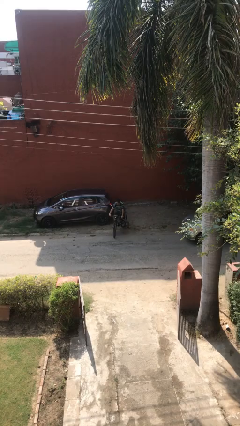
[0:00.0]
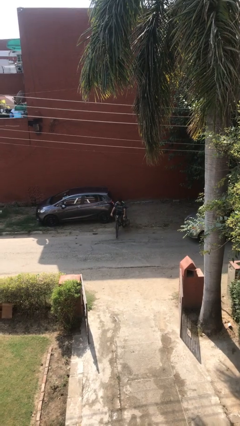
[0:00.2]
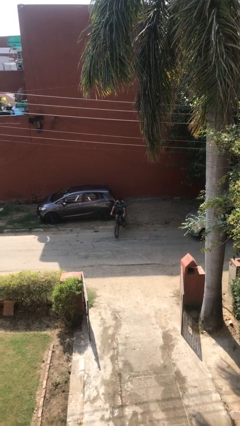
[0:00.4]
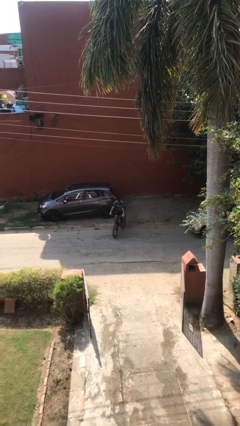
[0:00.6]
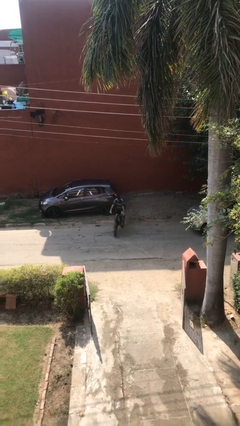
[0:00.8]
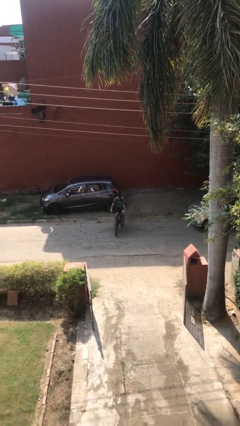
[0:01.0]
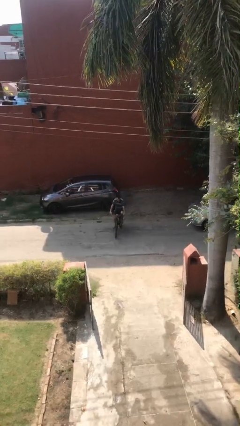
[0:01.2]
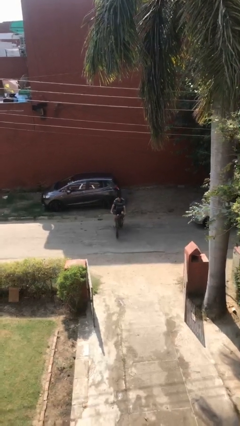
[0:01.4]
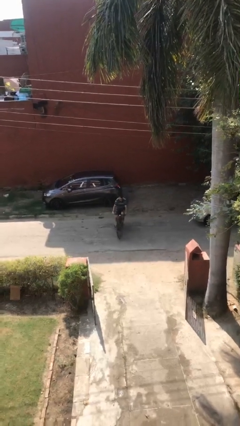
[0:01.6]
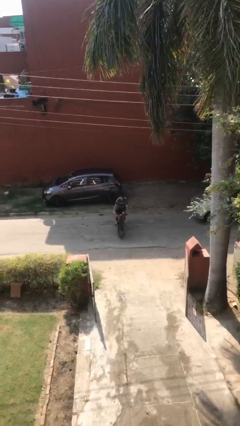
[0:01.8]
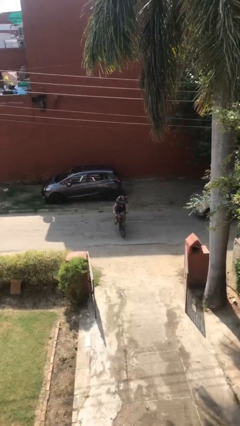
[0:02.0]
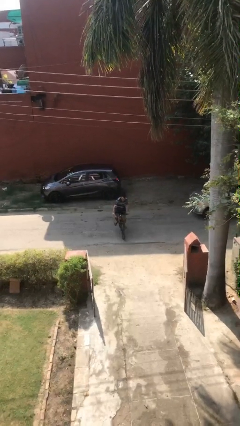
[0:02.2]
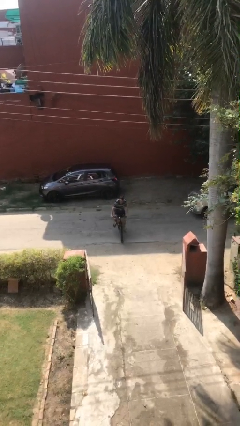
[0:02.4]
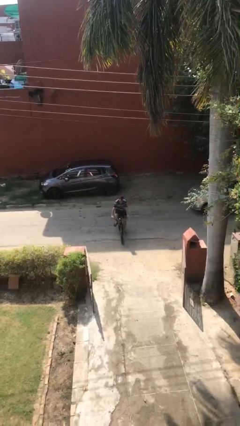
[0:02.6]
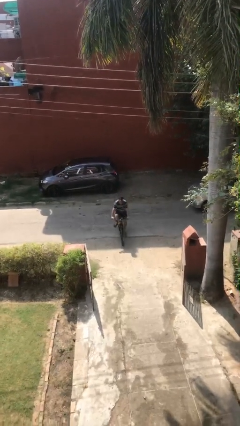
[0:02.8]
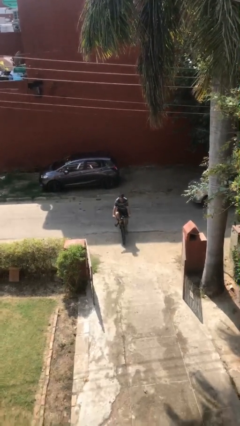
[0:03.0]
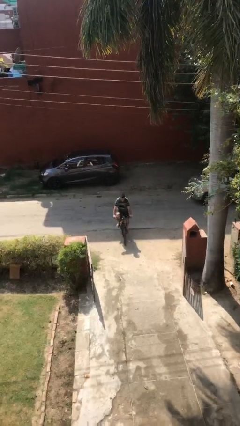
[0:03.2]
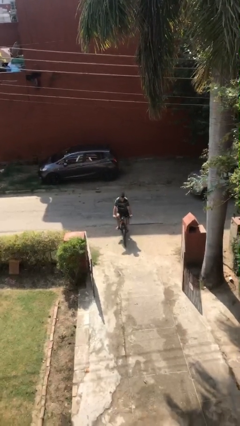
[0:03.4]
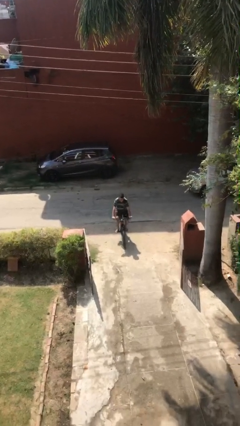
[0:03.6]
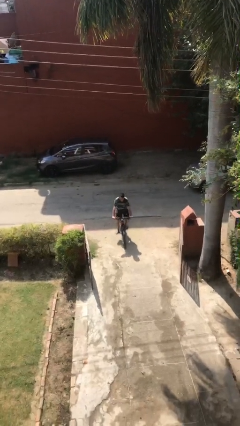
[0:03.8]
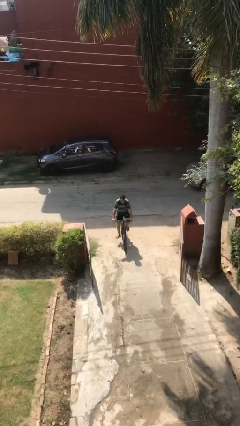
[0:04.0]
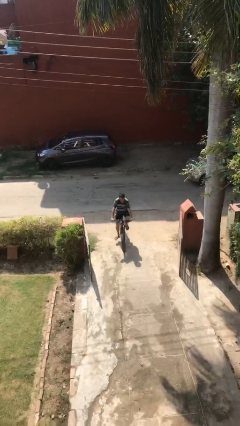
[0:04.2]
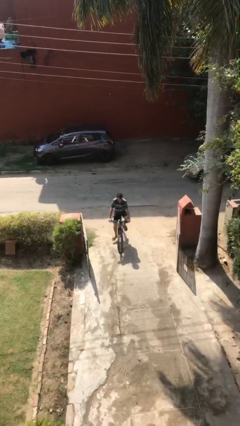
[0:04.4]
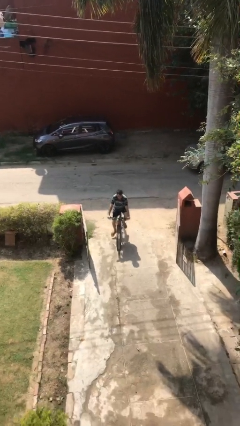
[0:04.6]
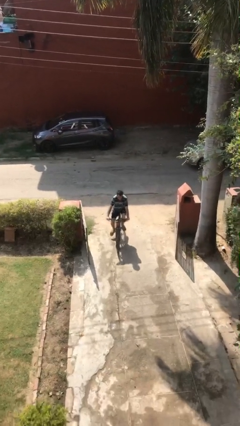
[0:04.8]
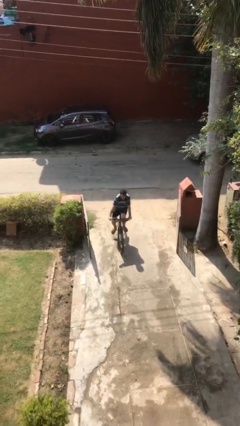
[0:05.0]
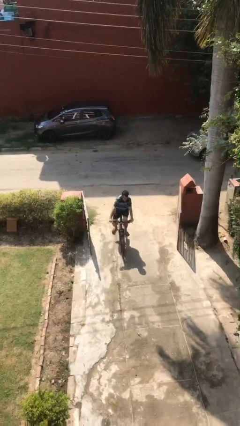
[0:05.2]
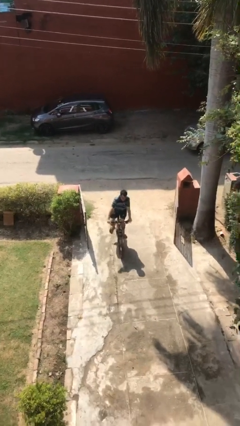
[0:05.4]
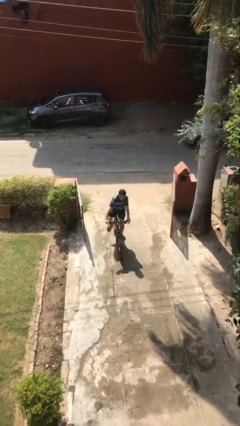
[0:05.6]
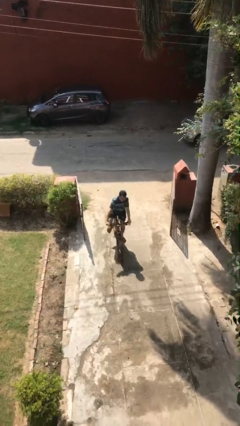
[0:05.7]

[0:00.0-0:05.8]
person rides bicycle

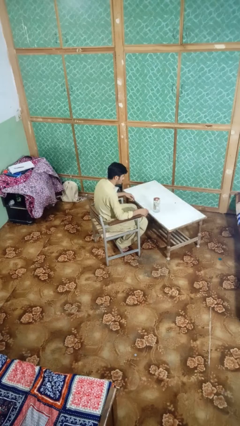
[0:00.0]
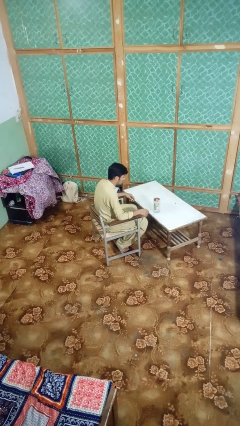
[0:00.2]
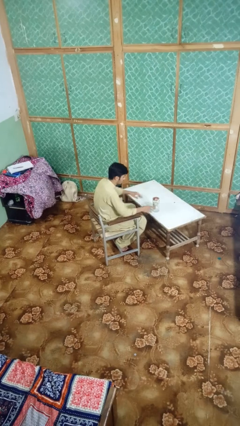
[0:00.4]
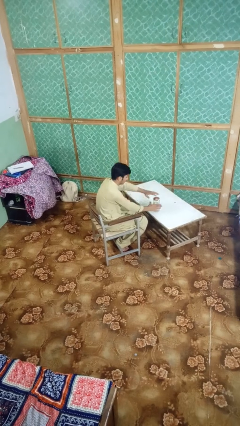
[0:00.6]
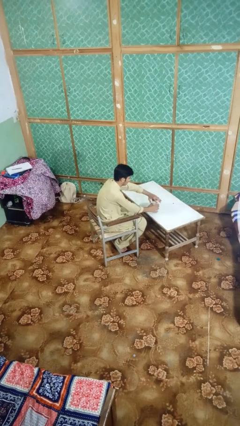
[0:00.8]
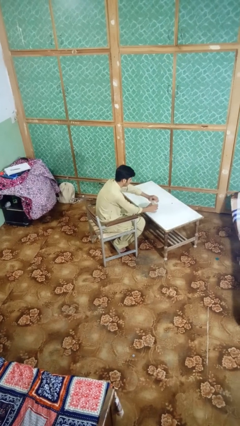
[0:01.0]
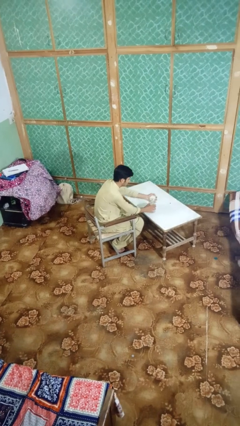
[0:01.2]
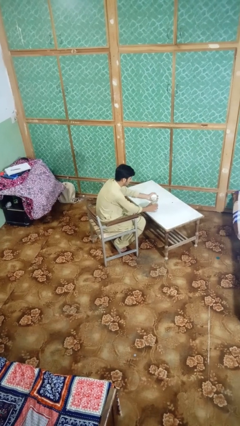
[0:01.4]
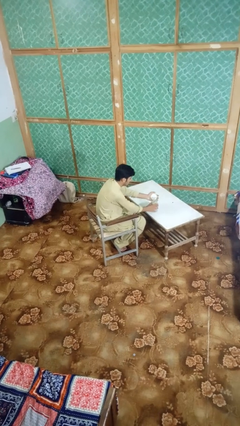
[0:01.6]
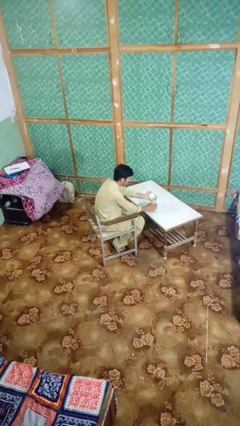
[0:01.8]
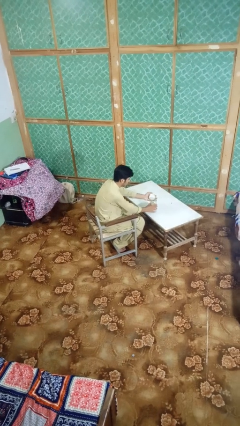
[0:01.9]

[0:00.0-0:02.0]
person opens jar

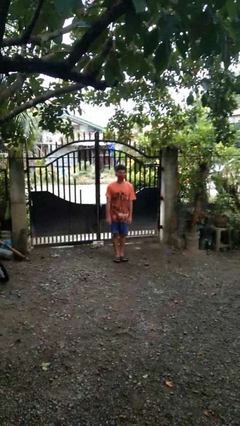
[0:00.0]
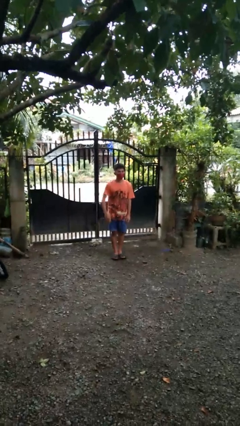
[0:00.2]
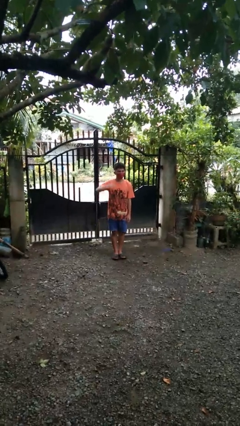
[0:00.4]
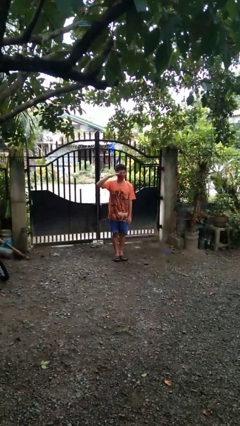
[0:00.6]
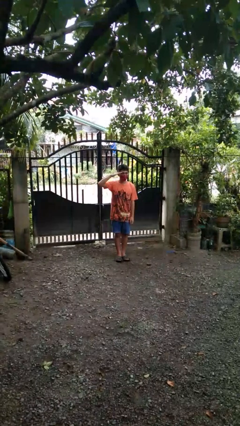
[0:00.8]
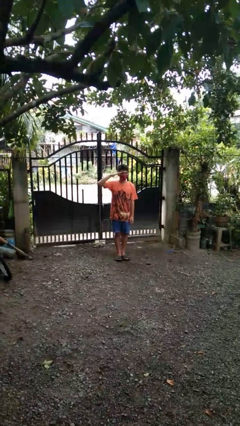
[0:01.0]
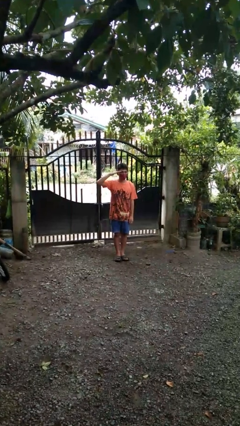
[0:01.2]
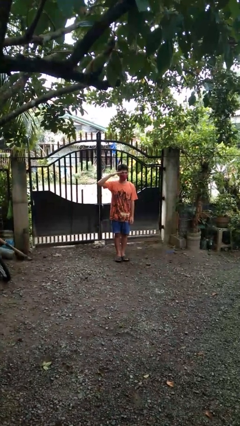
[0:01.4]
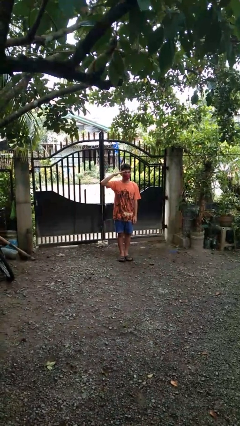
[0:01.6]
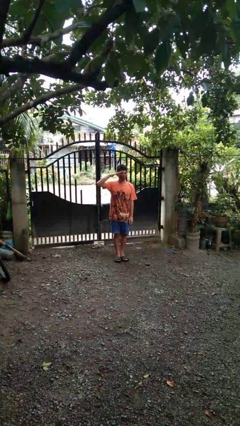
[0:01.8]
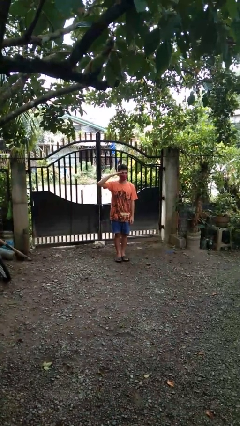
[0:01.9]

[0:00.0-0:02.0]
person salutes

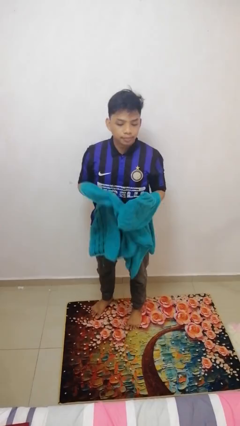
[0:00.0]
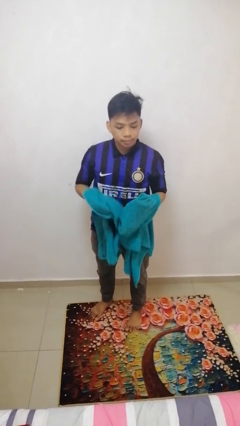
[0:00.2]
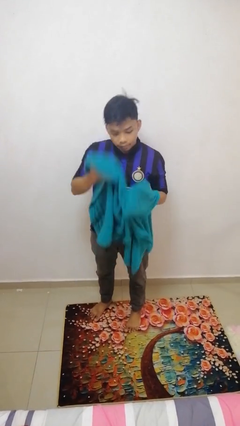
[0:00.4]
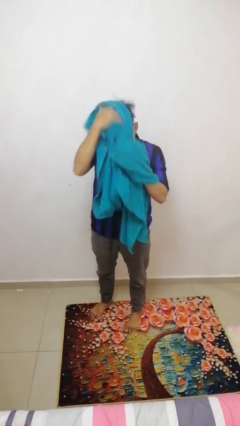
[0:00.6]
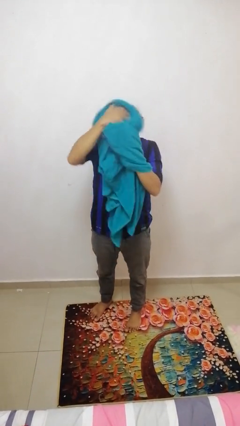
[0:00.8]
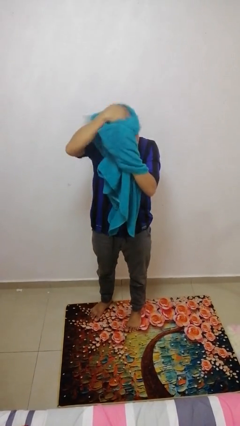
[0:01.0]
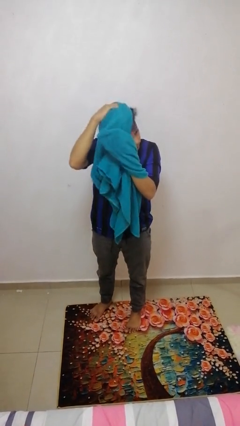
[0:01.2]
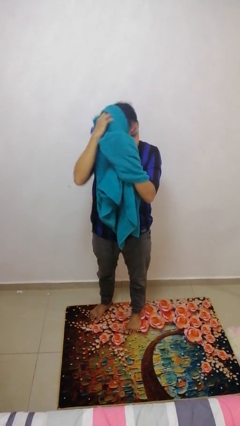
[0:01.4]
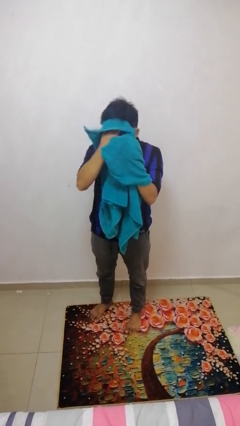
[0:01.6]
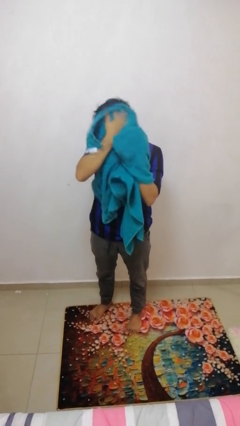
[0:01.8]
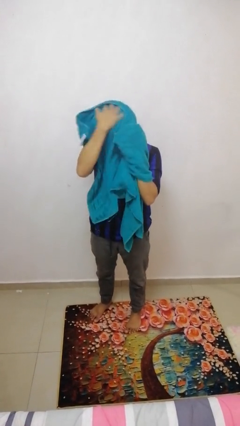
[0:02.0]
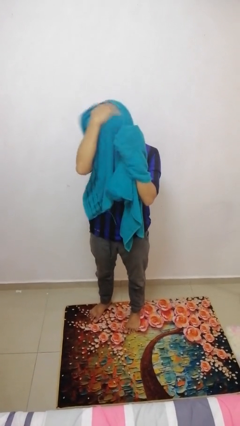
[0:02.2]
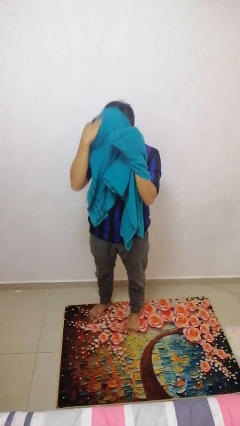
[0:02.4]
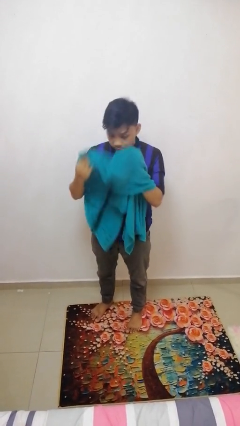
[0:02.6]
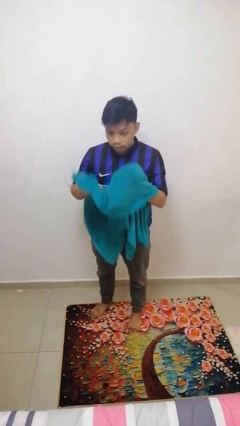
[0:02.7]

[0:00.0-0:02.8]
person dries hair with towel

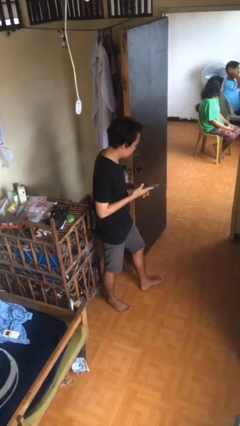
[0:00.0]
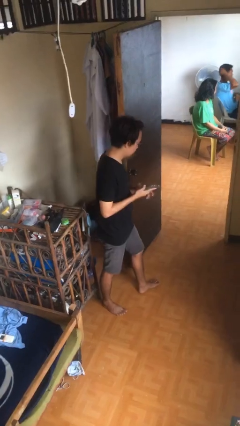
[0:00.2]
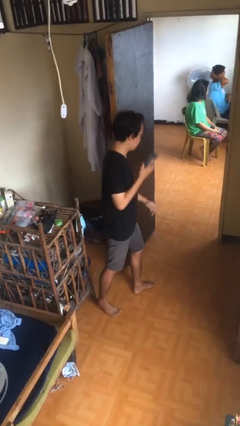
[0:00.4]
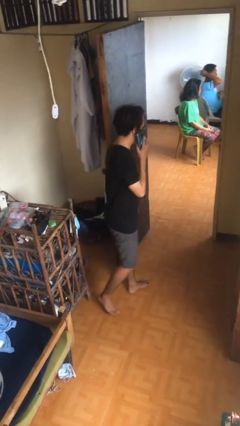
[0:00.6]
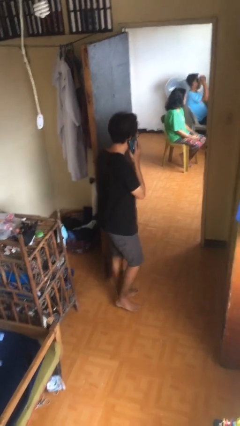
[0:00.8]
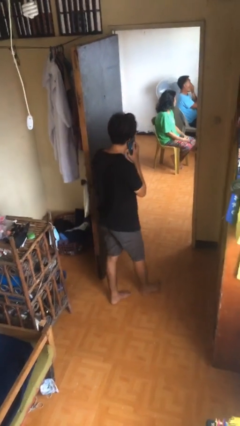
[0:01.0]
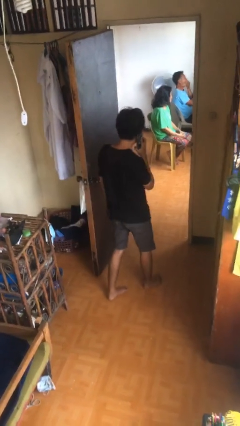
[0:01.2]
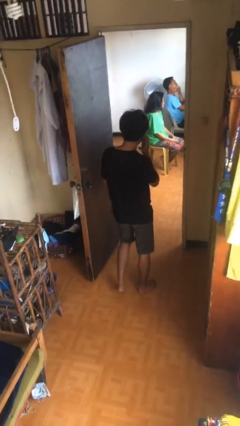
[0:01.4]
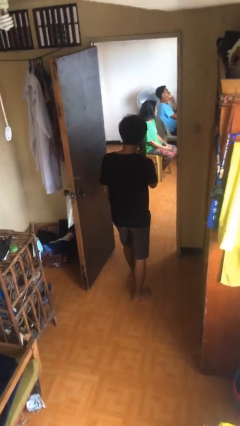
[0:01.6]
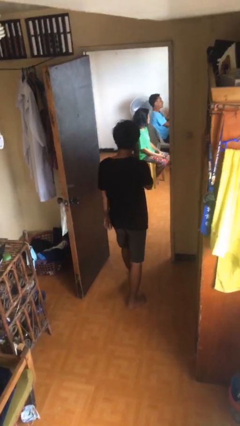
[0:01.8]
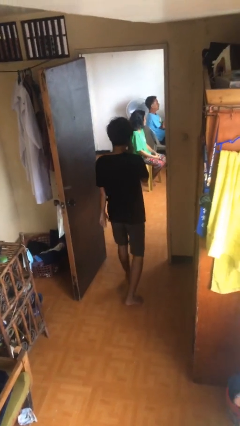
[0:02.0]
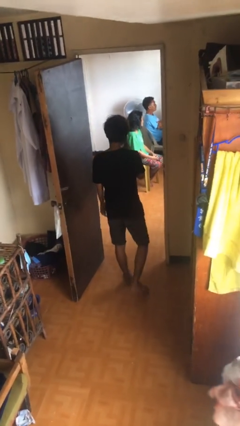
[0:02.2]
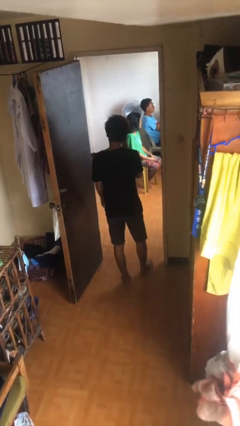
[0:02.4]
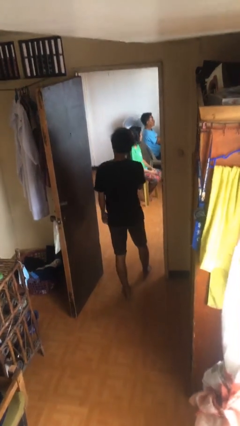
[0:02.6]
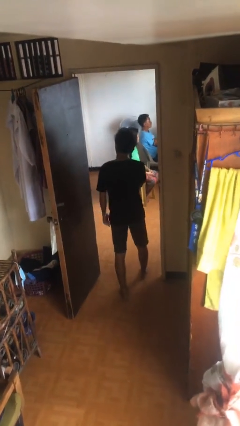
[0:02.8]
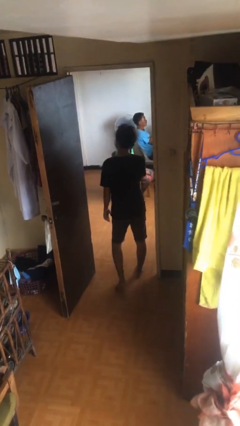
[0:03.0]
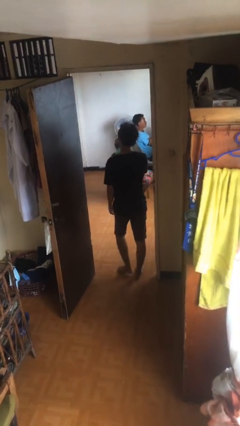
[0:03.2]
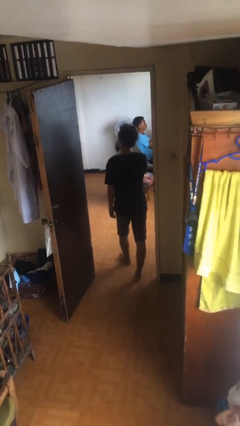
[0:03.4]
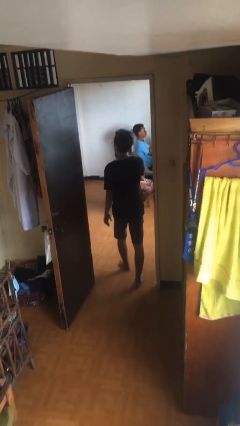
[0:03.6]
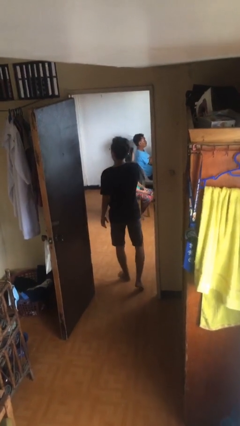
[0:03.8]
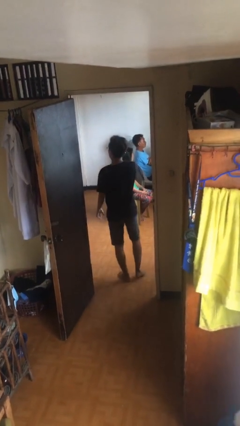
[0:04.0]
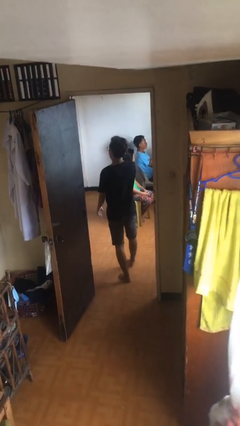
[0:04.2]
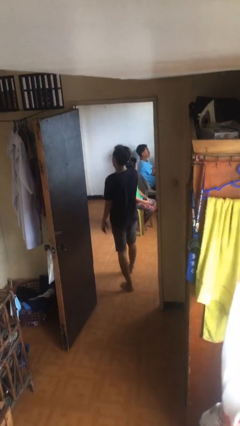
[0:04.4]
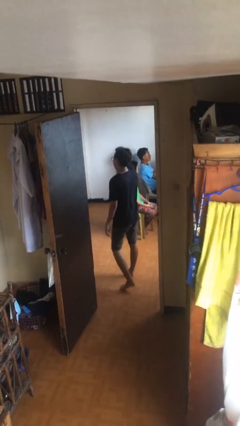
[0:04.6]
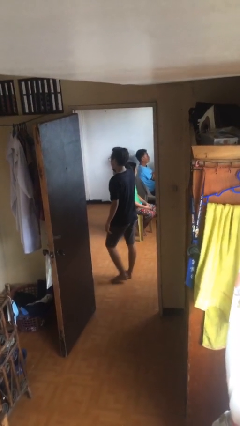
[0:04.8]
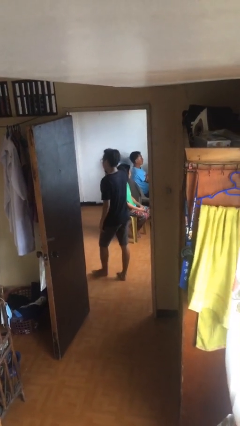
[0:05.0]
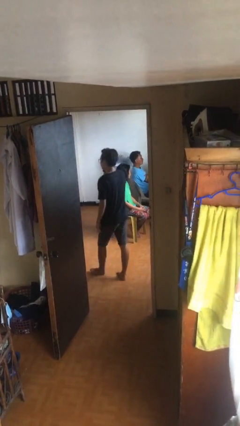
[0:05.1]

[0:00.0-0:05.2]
person exits scene through structure
